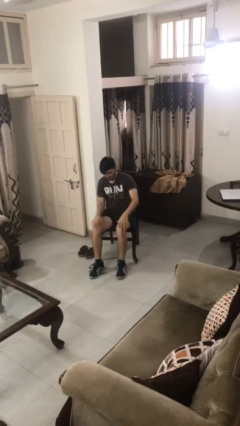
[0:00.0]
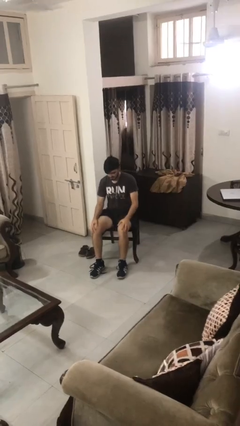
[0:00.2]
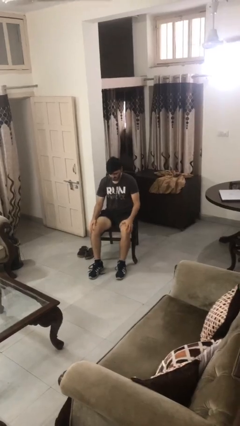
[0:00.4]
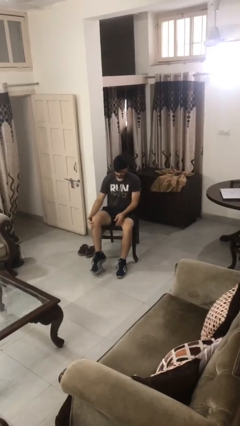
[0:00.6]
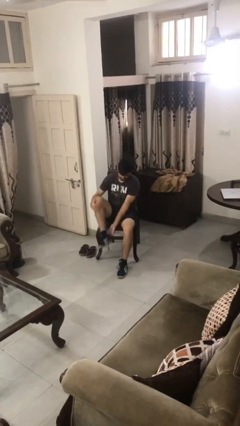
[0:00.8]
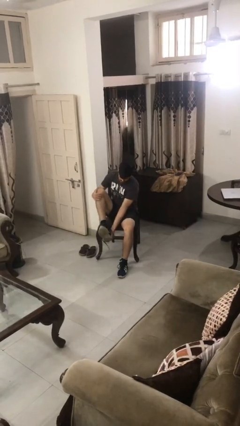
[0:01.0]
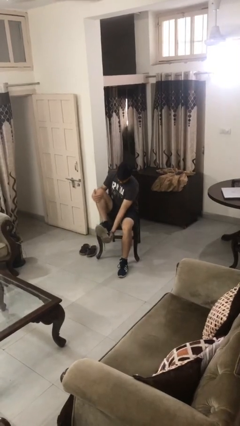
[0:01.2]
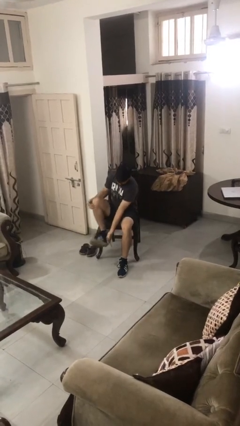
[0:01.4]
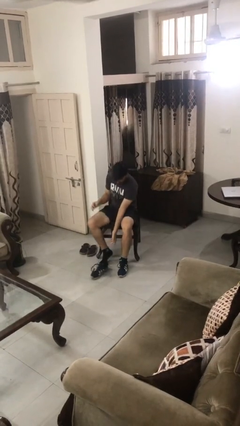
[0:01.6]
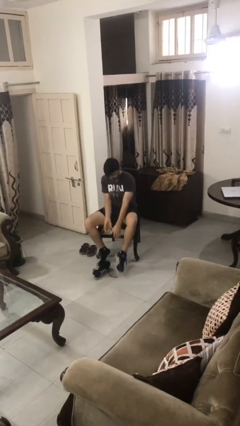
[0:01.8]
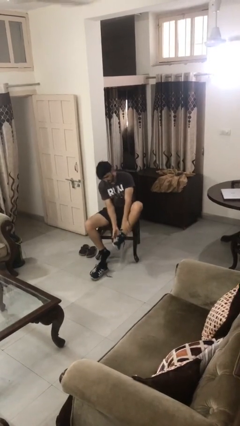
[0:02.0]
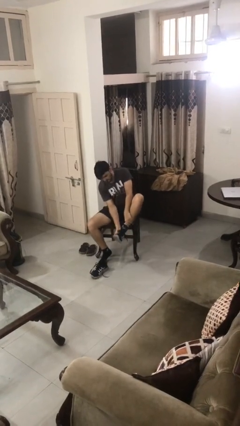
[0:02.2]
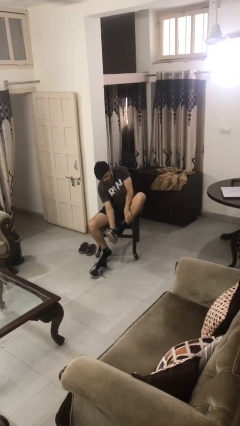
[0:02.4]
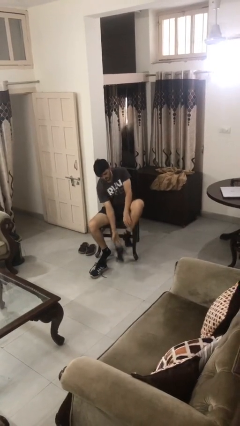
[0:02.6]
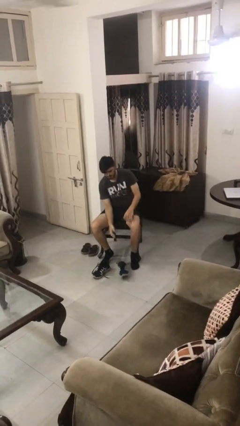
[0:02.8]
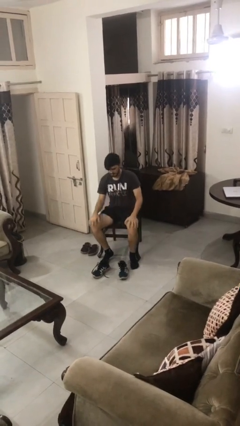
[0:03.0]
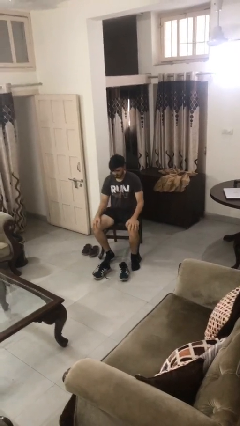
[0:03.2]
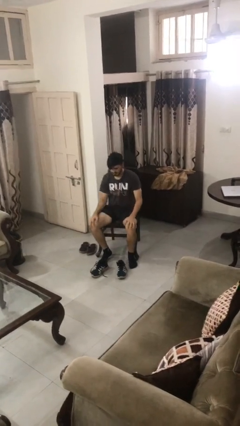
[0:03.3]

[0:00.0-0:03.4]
person takes off shoes

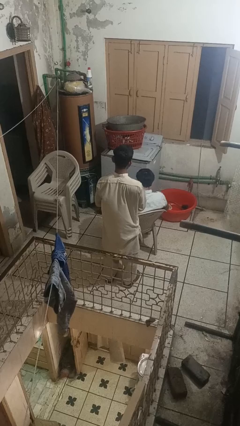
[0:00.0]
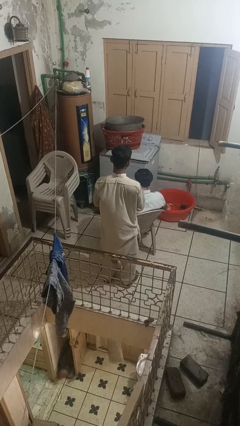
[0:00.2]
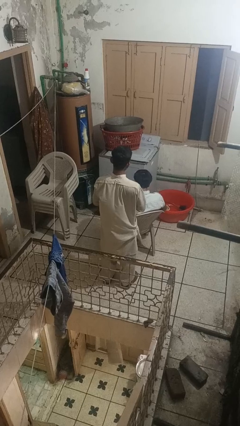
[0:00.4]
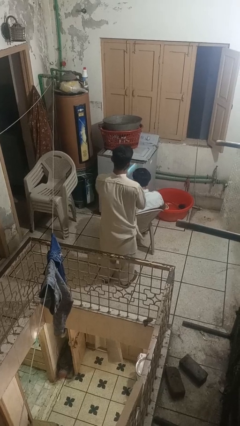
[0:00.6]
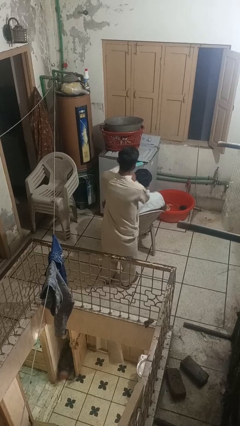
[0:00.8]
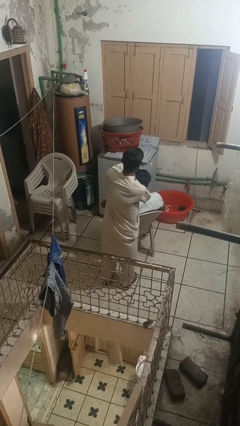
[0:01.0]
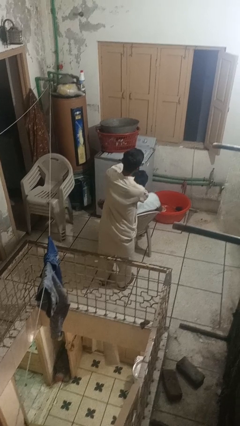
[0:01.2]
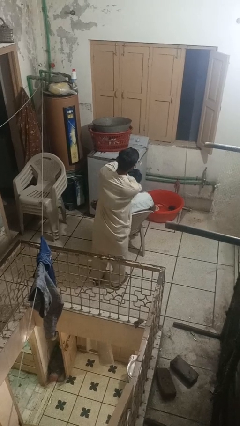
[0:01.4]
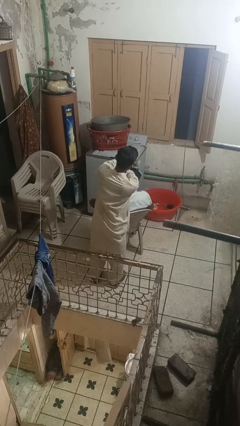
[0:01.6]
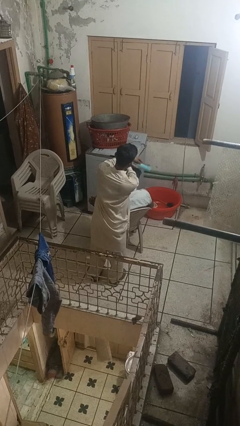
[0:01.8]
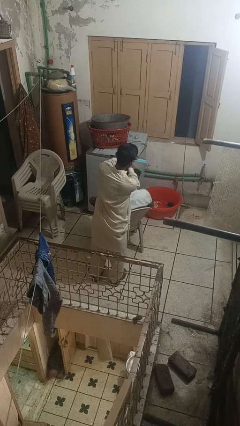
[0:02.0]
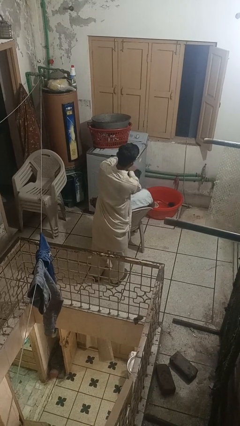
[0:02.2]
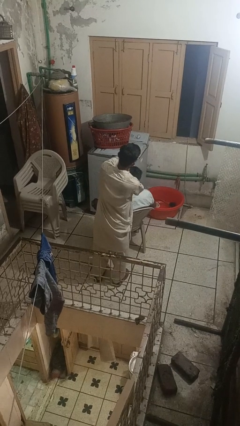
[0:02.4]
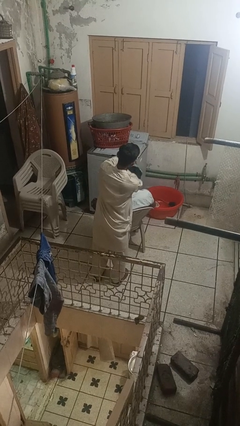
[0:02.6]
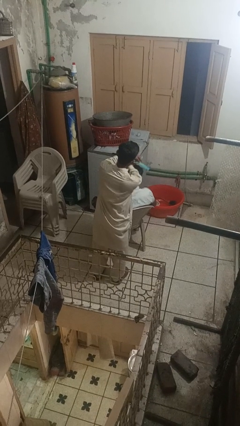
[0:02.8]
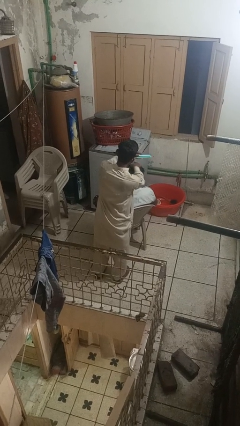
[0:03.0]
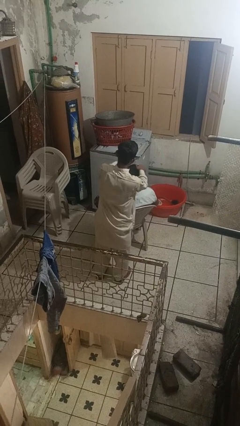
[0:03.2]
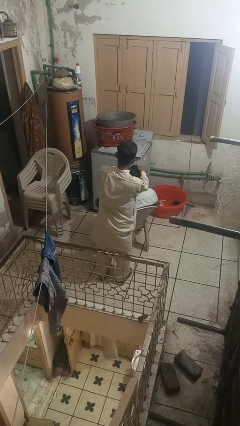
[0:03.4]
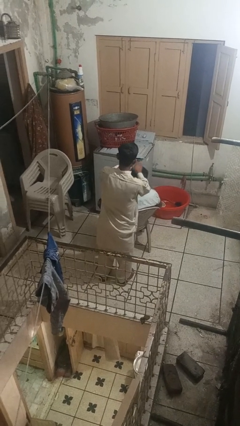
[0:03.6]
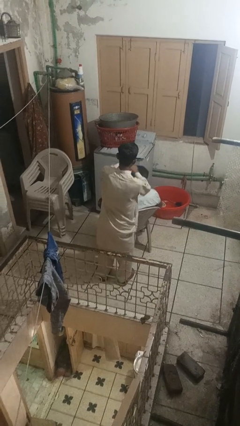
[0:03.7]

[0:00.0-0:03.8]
person brushes hair of person

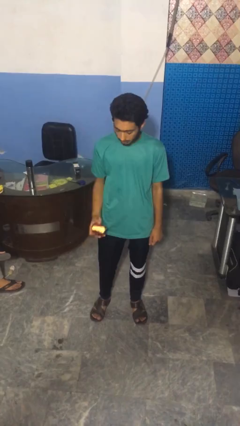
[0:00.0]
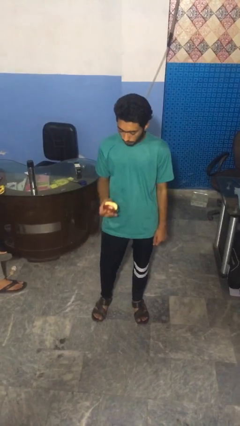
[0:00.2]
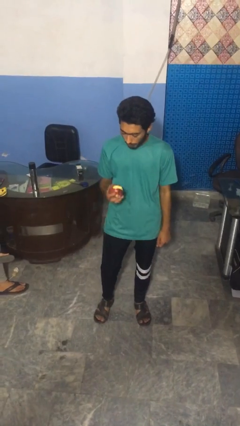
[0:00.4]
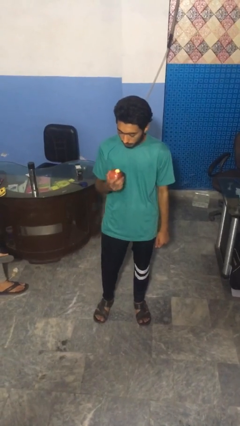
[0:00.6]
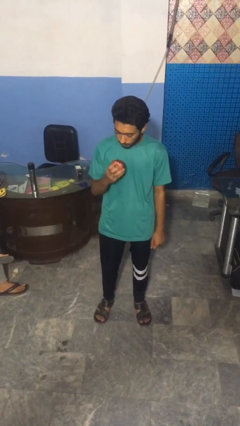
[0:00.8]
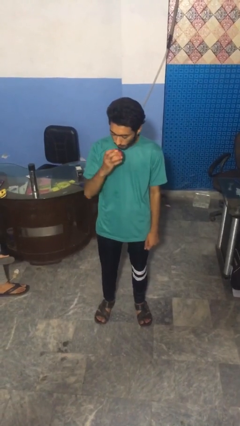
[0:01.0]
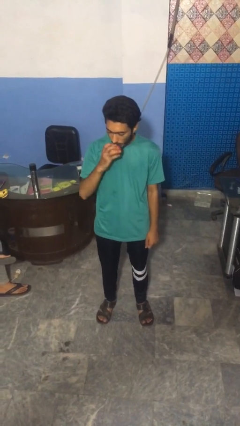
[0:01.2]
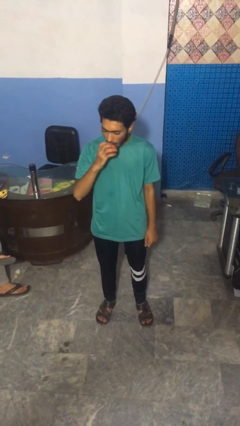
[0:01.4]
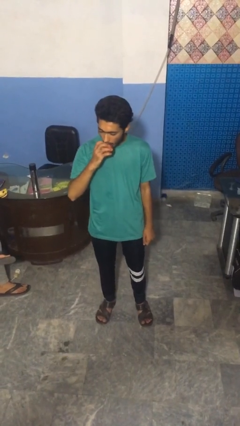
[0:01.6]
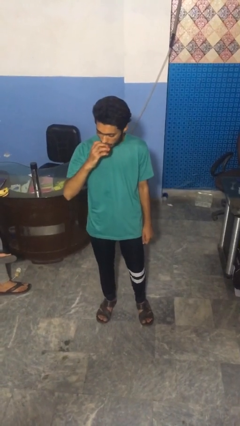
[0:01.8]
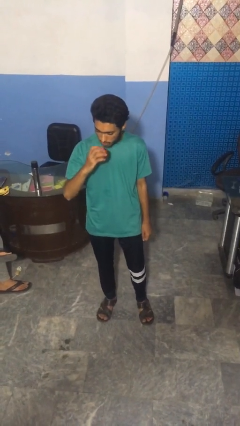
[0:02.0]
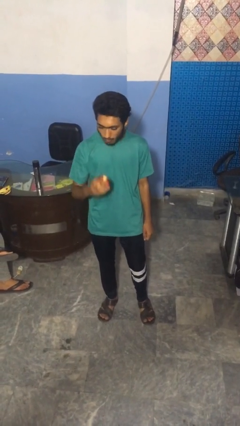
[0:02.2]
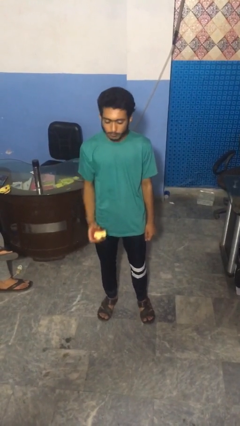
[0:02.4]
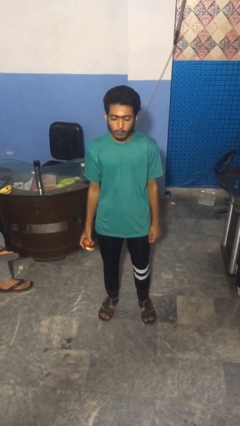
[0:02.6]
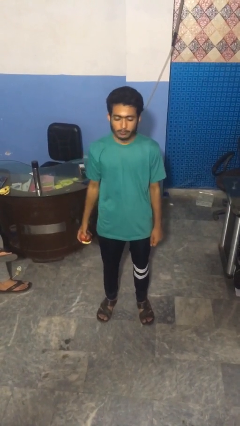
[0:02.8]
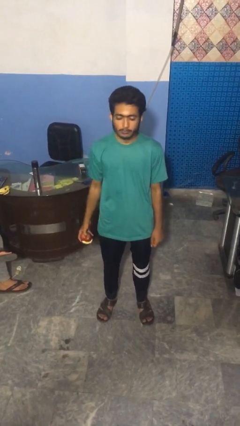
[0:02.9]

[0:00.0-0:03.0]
person eats apple

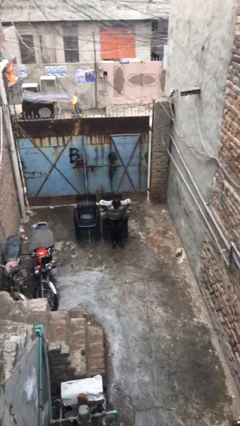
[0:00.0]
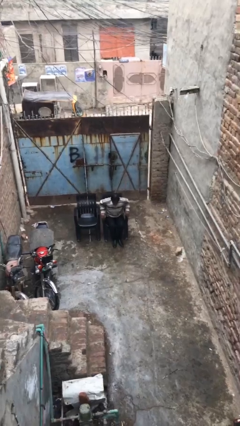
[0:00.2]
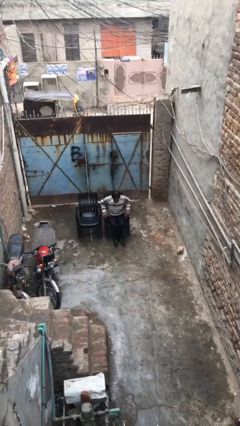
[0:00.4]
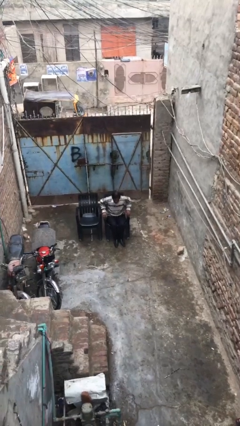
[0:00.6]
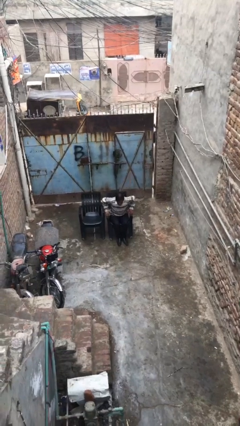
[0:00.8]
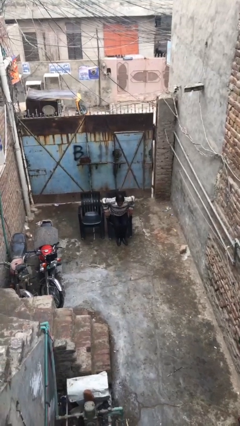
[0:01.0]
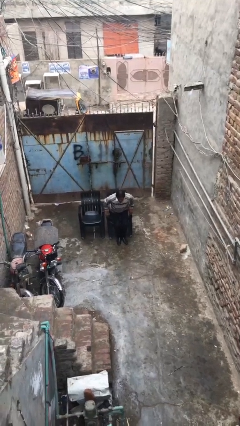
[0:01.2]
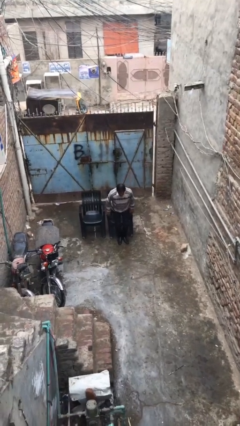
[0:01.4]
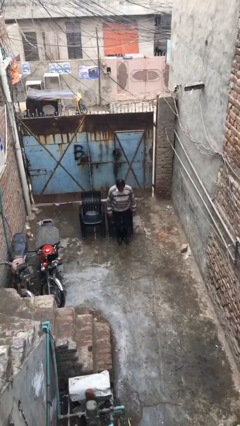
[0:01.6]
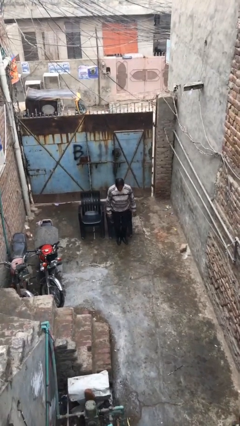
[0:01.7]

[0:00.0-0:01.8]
person stands up

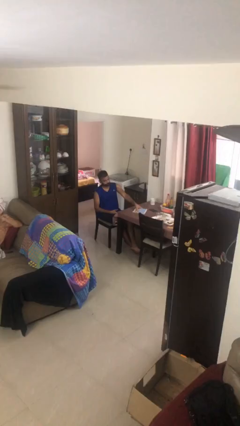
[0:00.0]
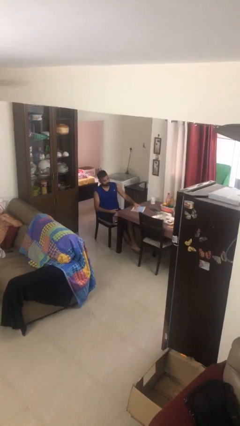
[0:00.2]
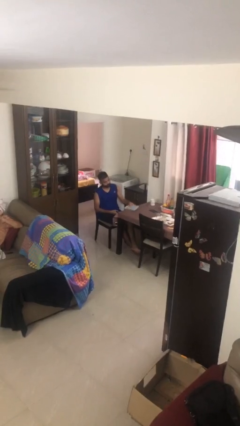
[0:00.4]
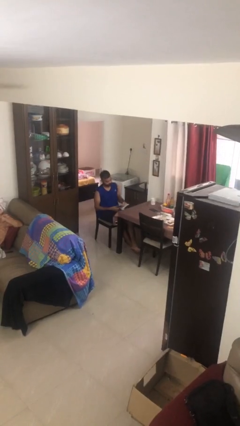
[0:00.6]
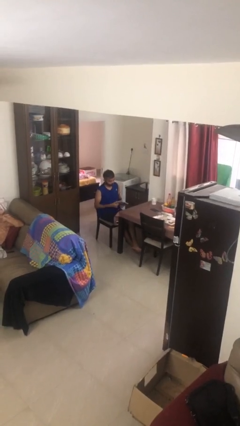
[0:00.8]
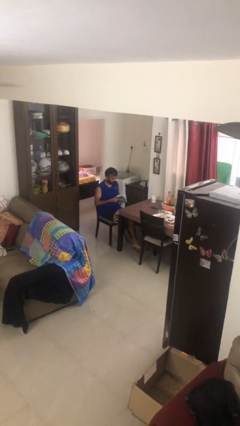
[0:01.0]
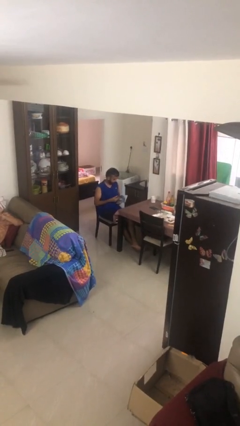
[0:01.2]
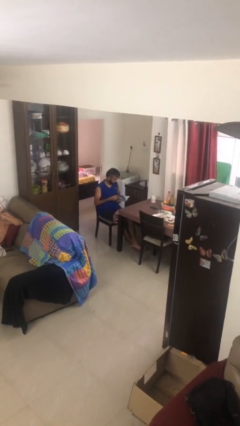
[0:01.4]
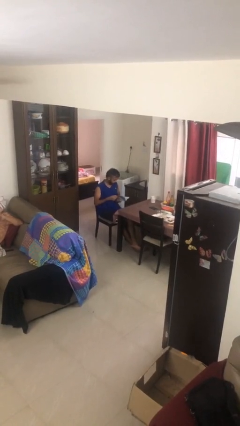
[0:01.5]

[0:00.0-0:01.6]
person picks up object from table

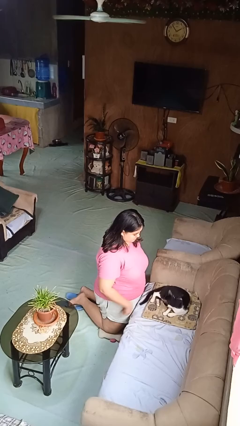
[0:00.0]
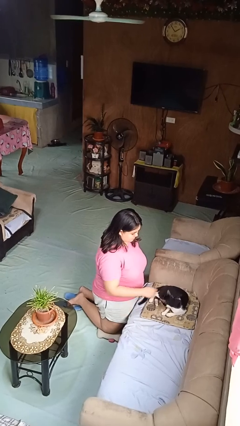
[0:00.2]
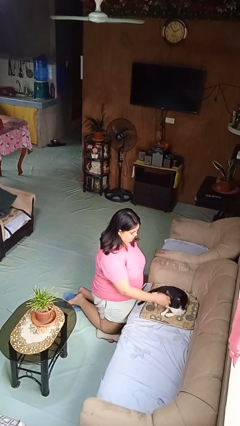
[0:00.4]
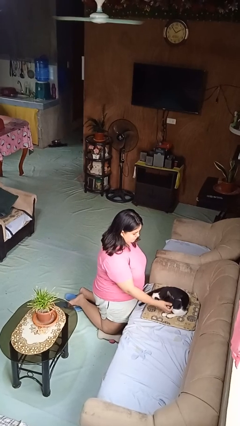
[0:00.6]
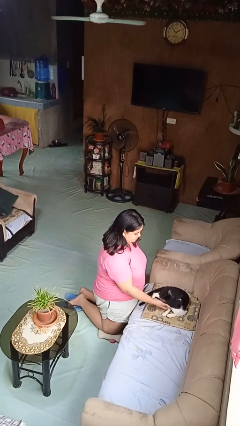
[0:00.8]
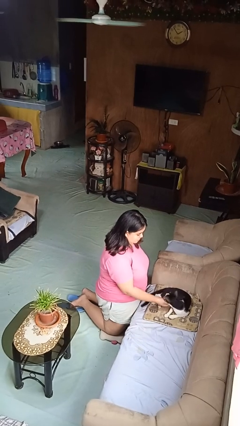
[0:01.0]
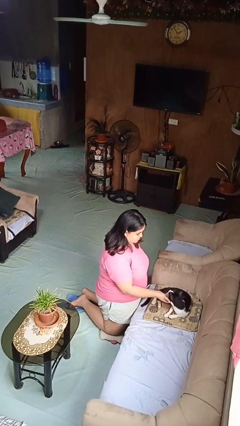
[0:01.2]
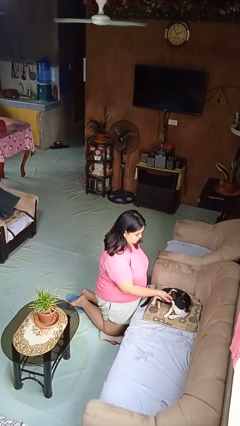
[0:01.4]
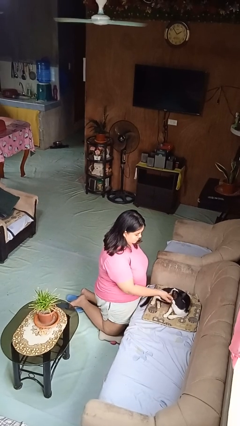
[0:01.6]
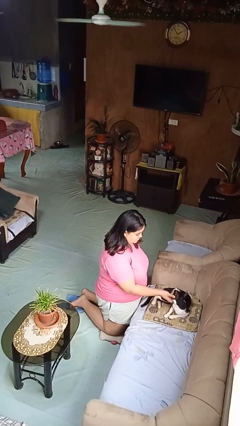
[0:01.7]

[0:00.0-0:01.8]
person pets cat

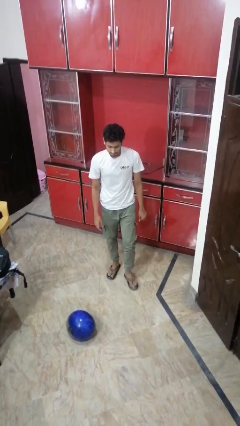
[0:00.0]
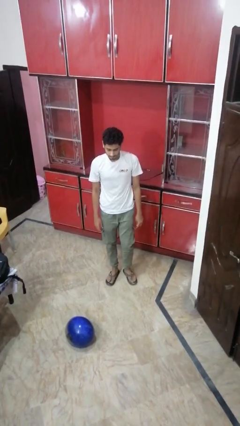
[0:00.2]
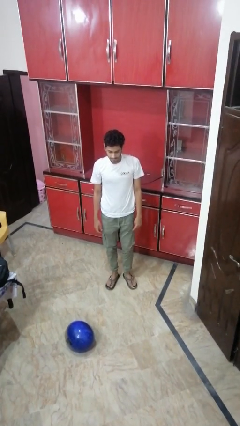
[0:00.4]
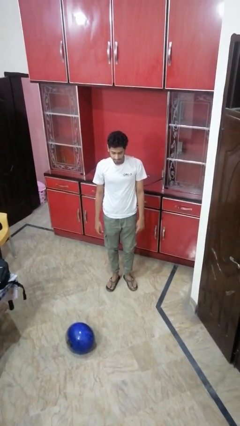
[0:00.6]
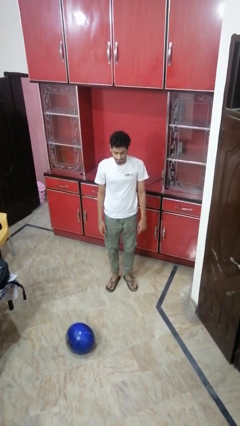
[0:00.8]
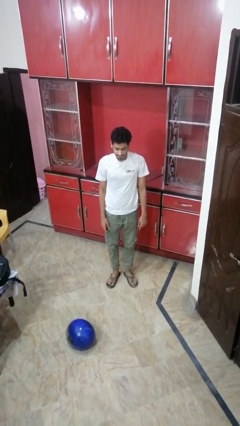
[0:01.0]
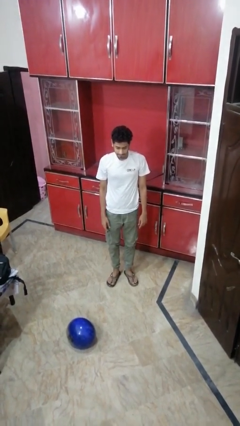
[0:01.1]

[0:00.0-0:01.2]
person stands up from floor

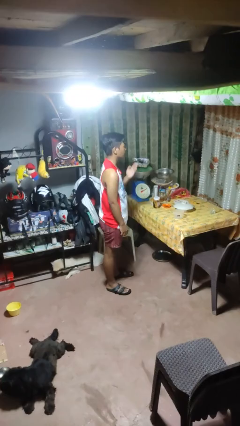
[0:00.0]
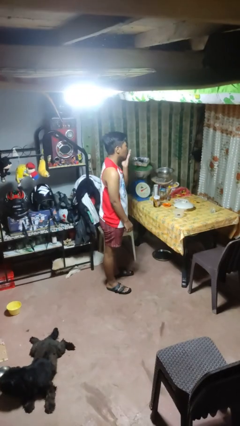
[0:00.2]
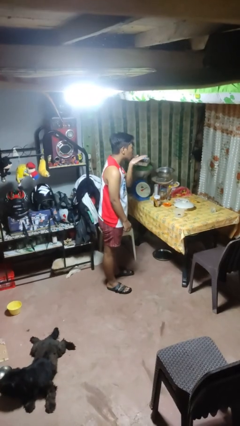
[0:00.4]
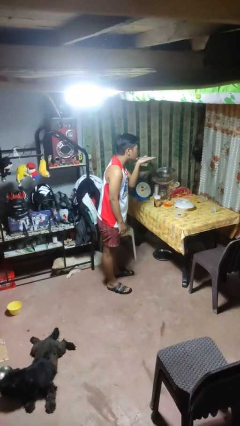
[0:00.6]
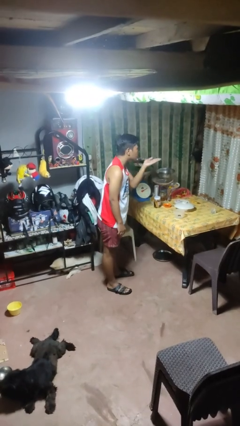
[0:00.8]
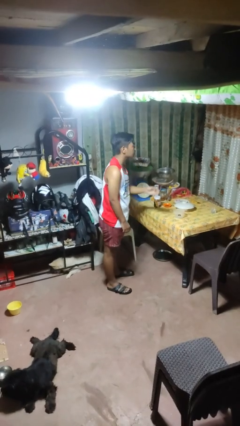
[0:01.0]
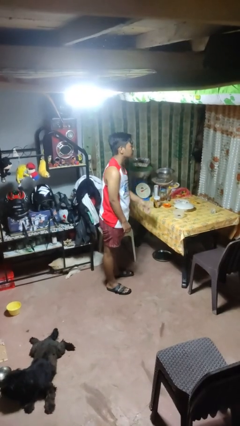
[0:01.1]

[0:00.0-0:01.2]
person gestures blow kiss
